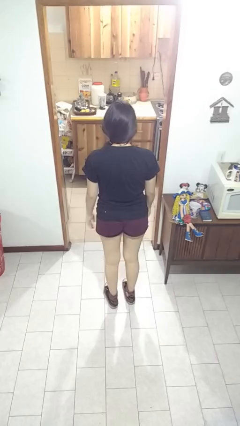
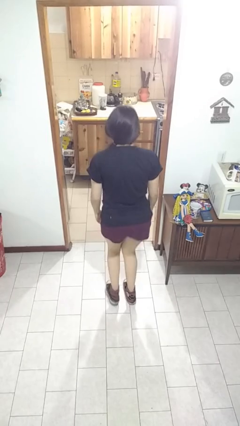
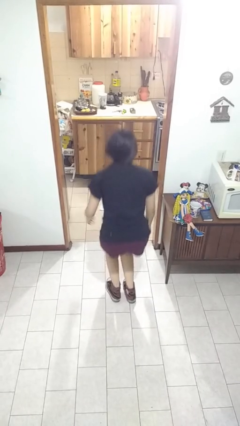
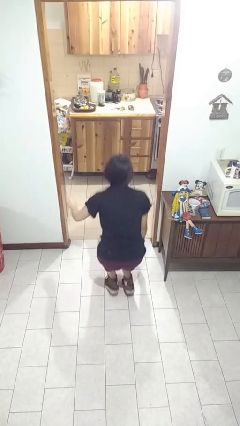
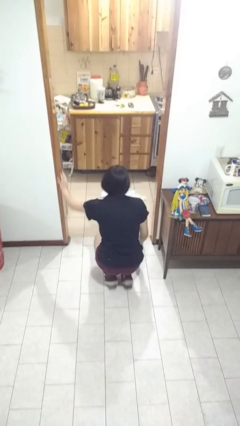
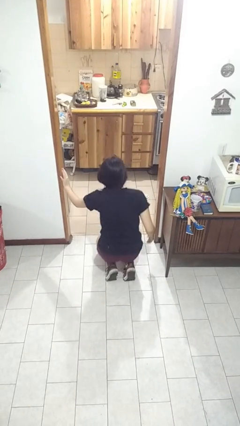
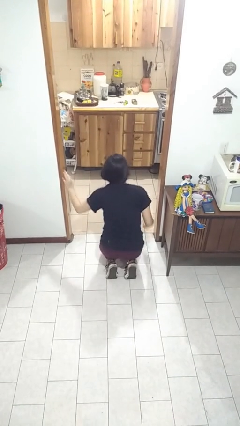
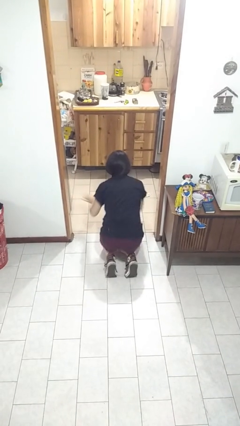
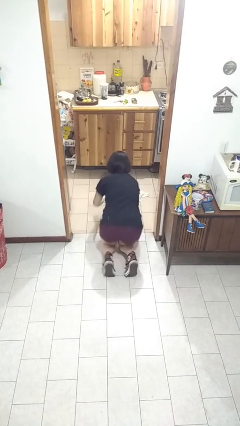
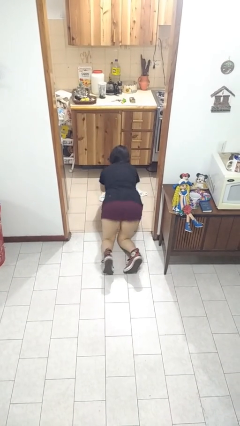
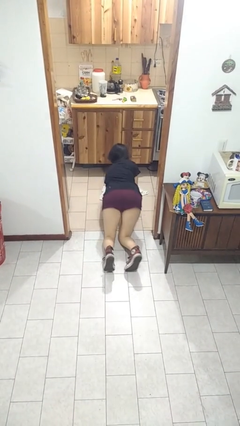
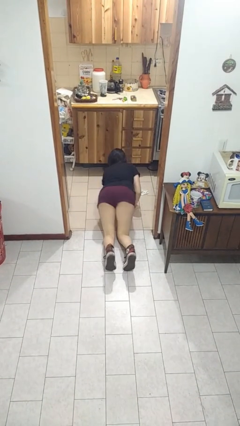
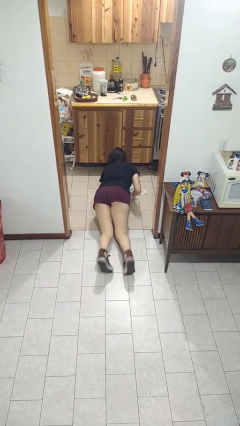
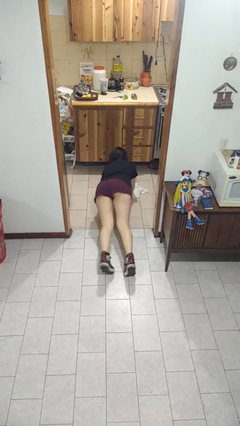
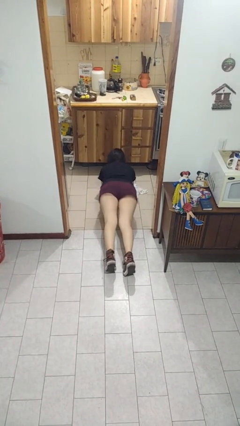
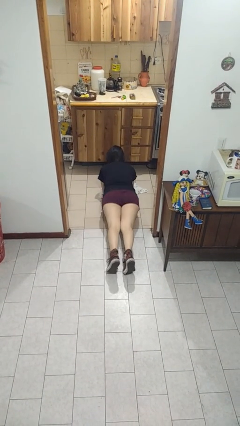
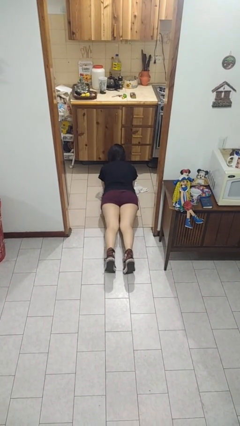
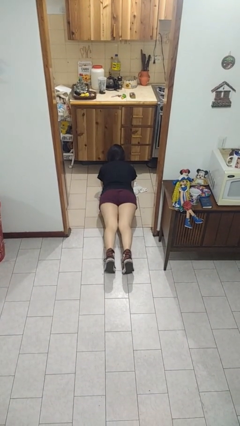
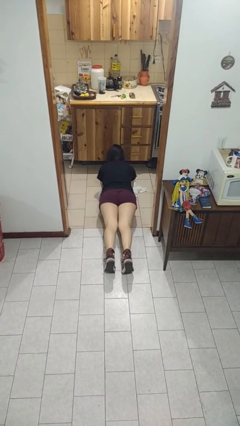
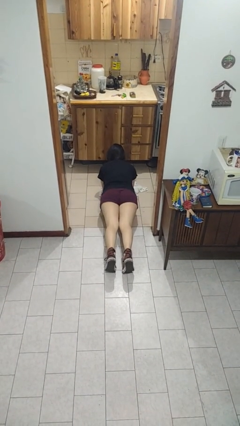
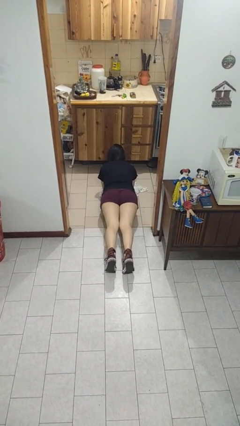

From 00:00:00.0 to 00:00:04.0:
person exercises with plank

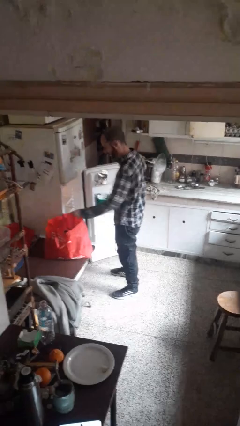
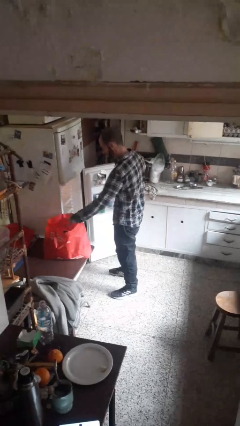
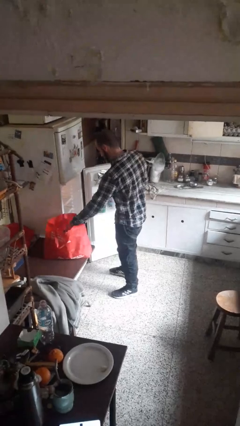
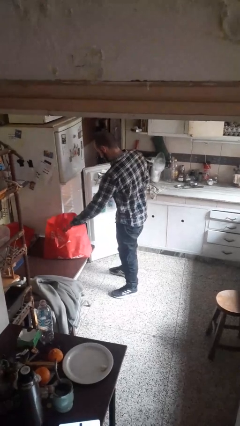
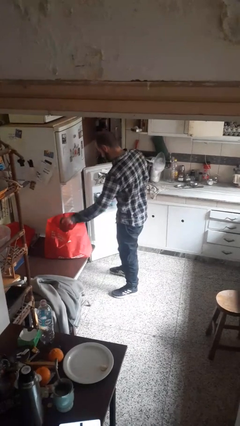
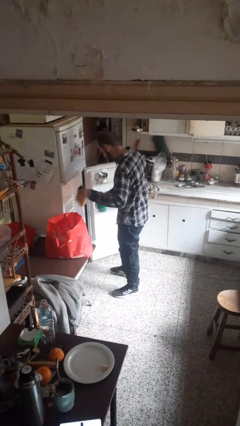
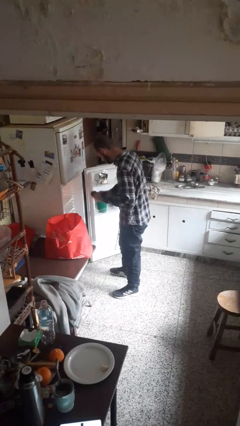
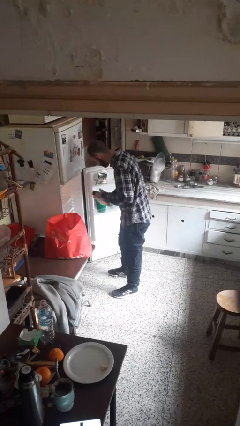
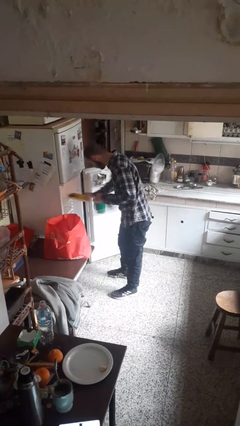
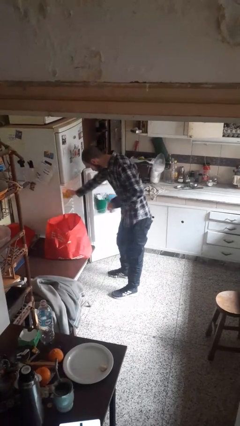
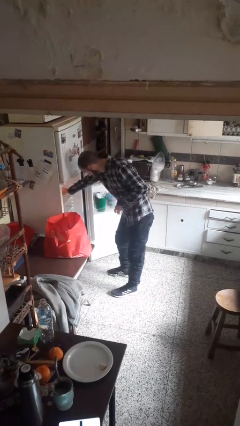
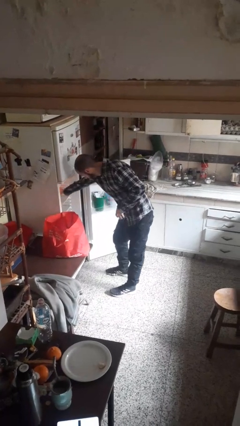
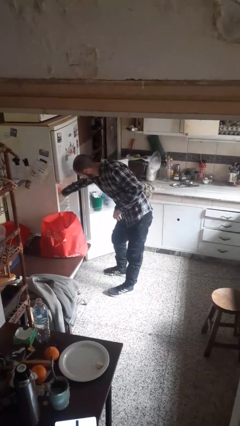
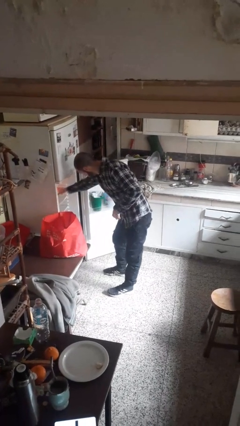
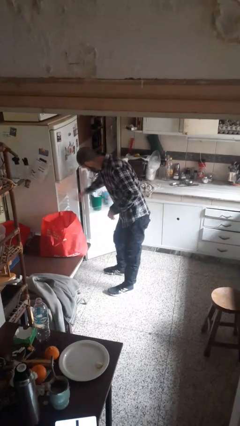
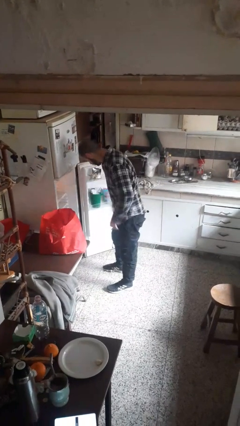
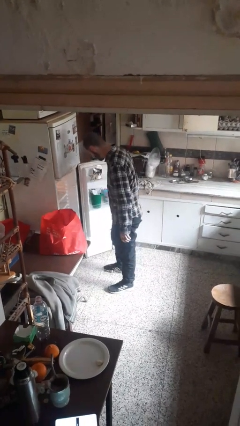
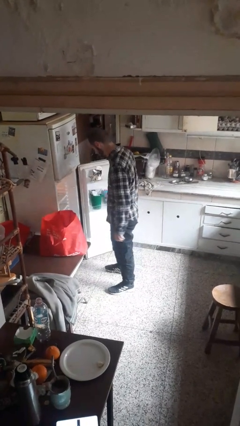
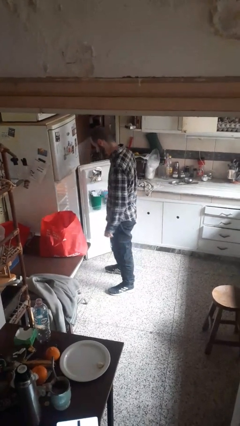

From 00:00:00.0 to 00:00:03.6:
person loads groceries into refrigerator

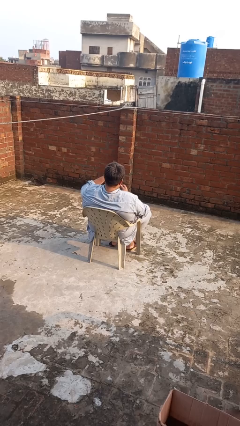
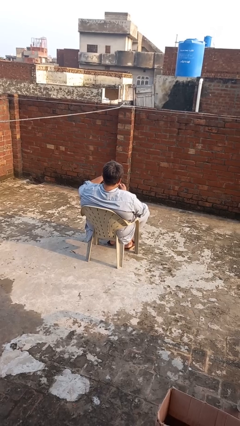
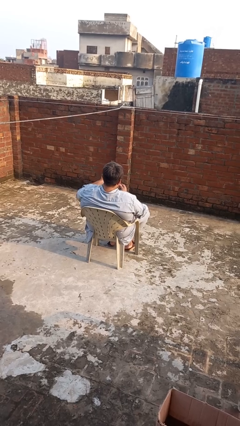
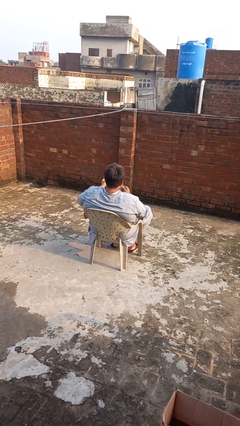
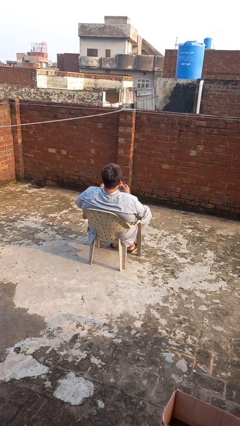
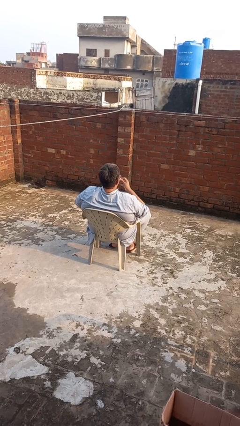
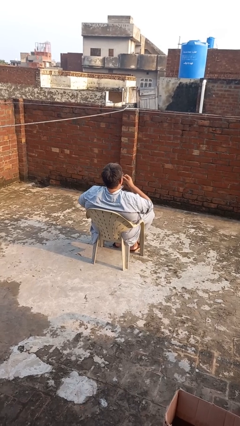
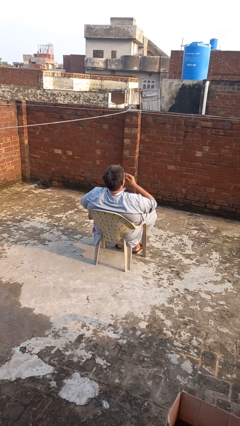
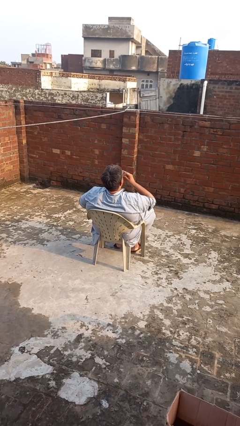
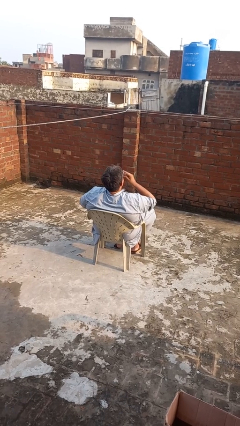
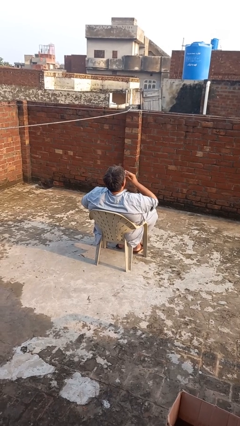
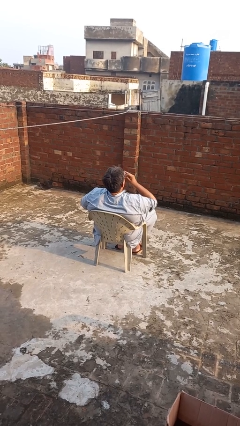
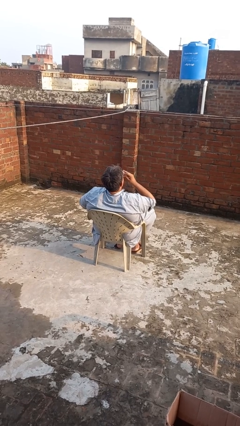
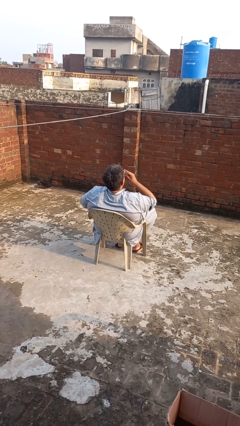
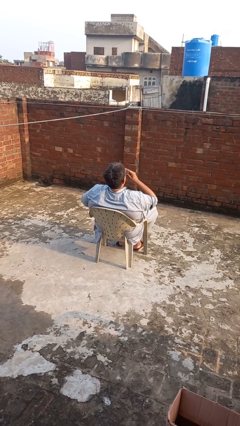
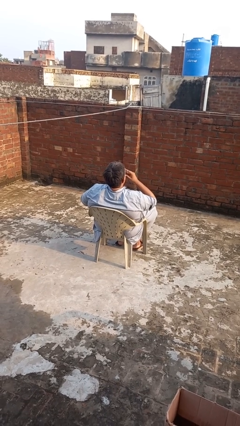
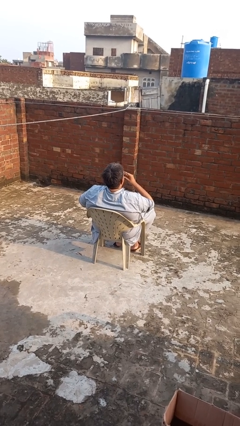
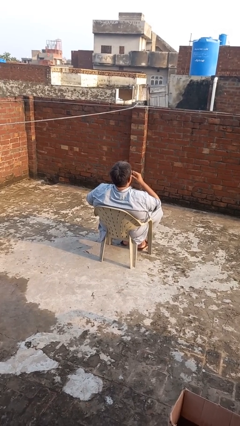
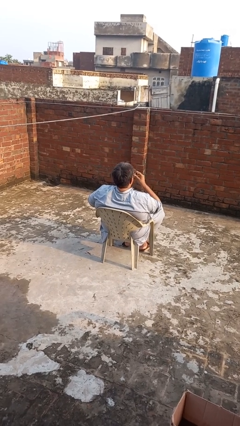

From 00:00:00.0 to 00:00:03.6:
person drinks from mug

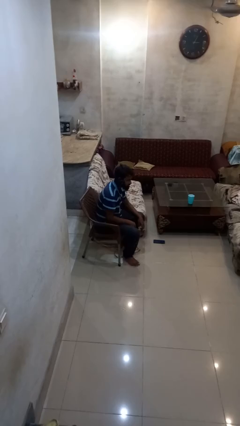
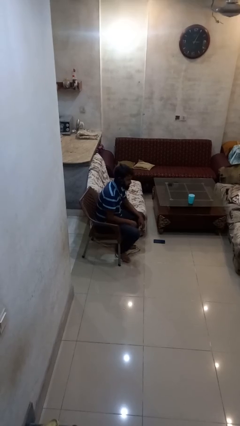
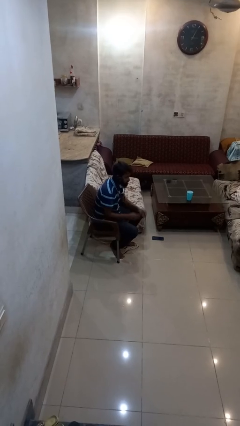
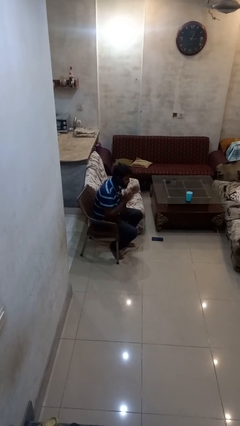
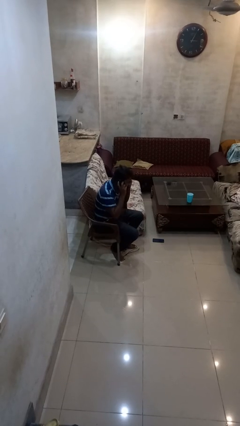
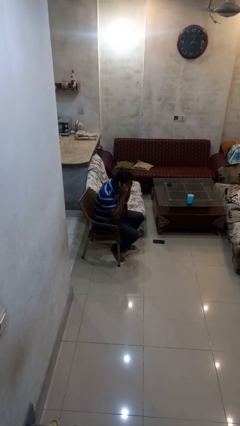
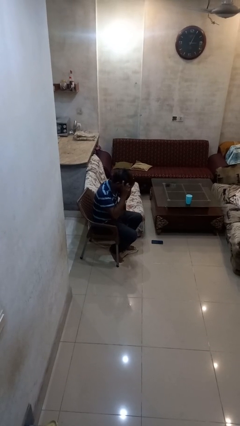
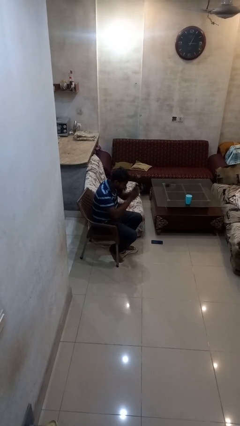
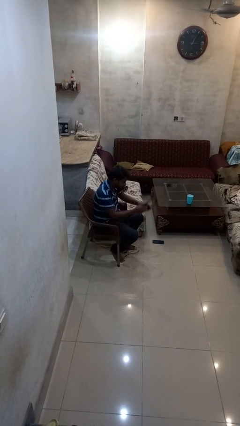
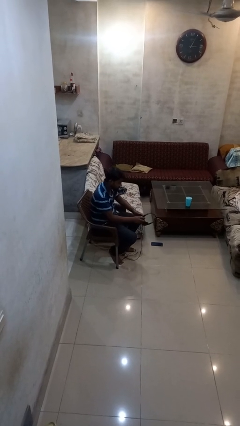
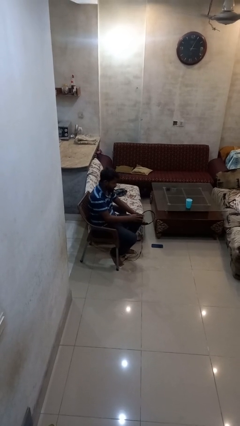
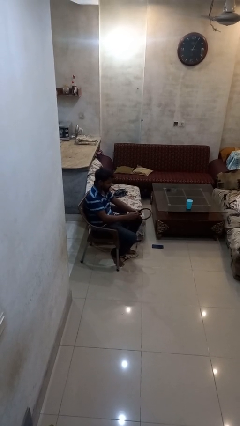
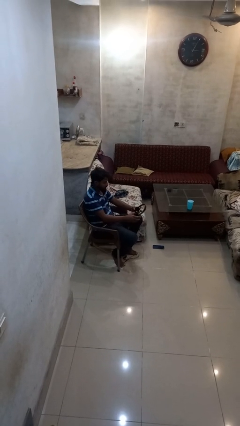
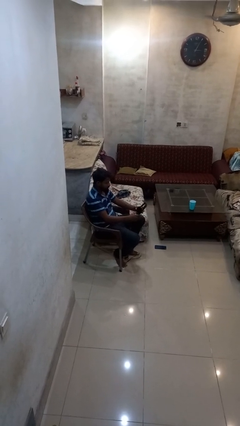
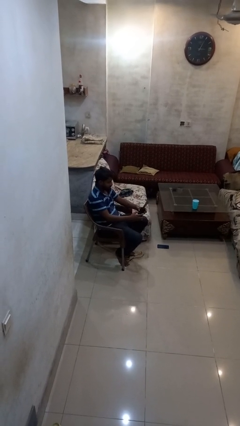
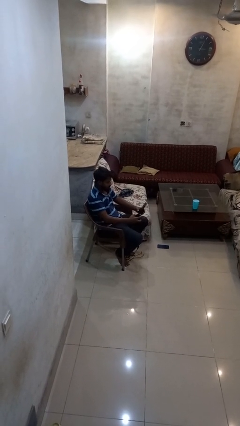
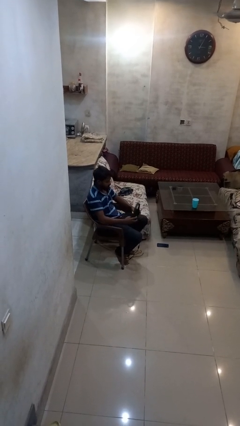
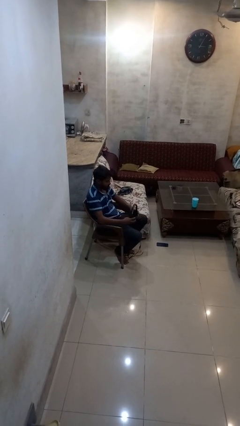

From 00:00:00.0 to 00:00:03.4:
person takes off headphones

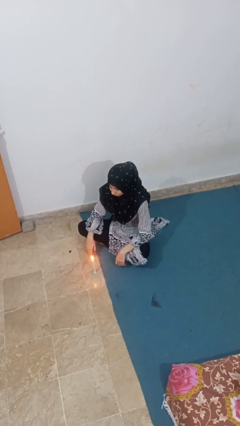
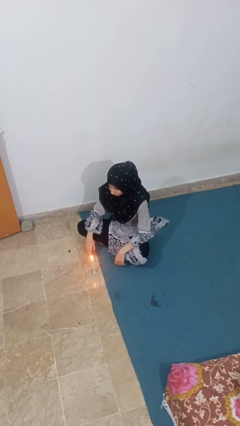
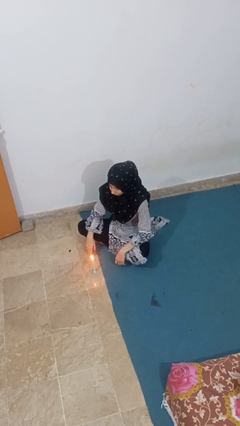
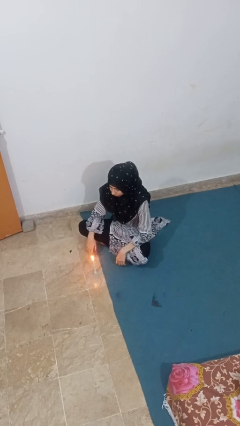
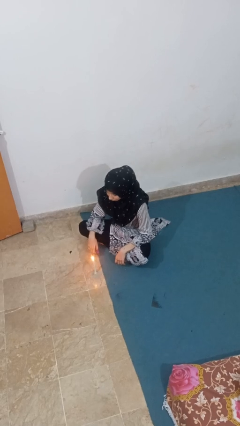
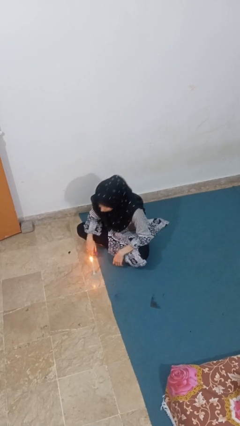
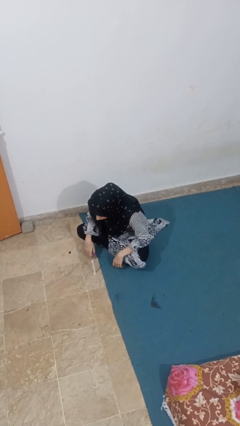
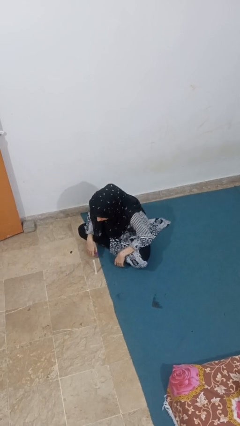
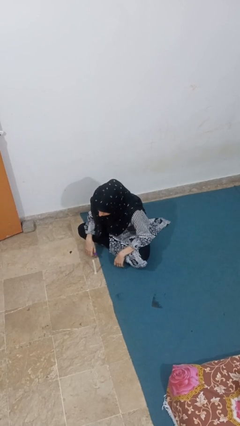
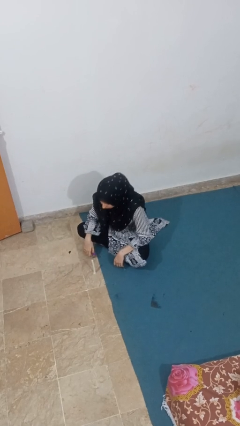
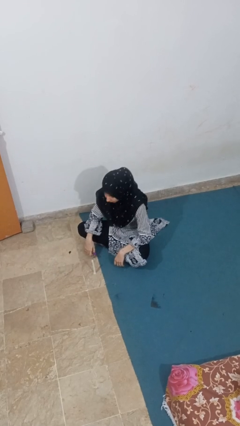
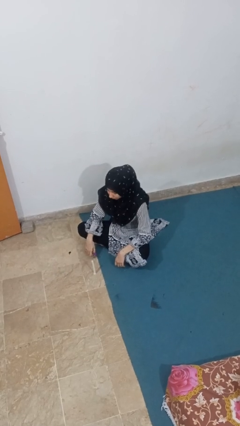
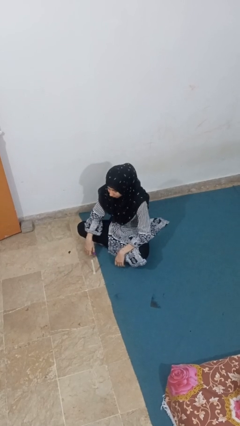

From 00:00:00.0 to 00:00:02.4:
person extinguishes candle

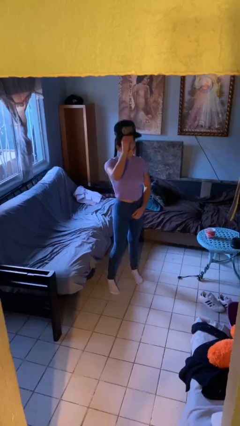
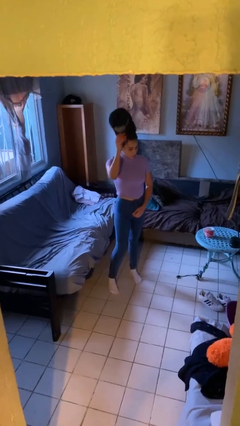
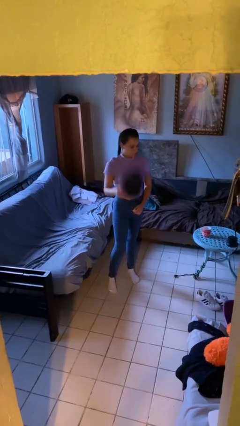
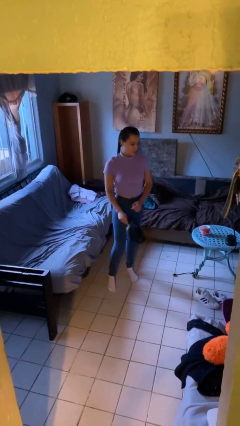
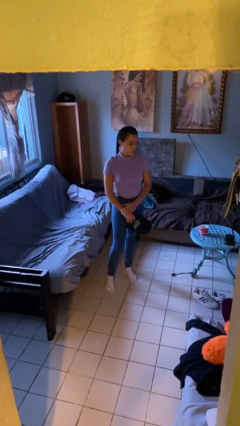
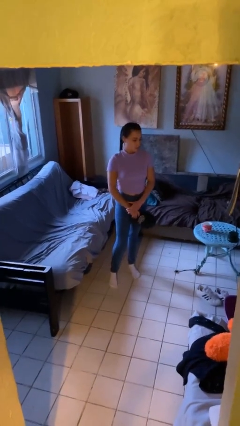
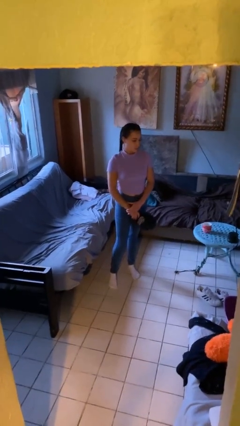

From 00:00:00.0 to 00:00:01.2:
person takes off hat
